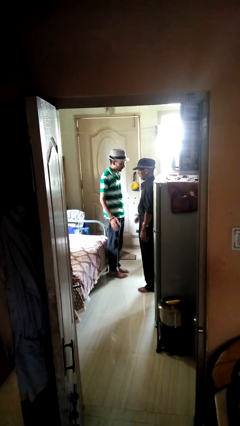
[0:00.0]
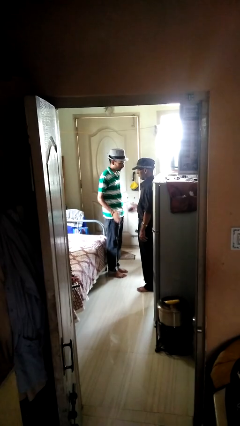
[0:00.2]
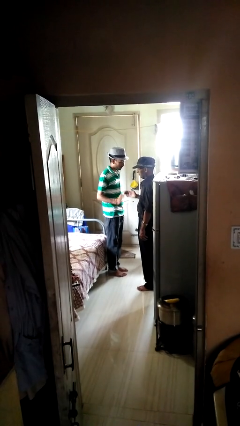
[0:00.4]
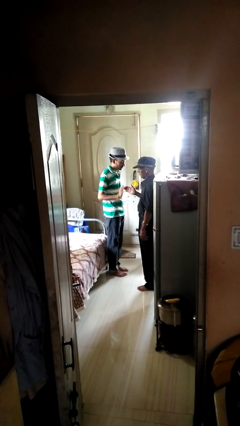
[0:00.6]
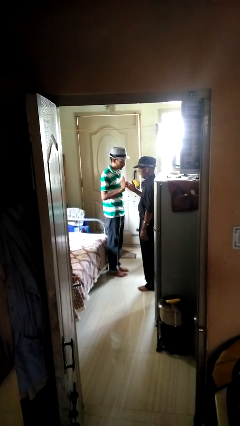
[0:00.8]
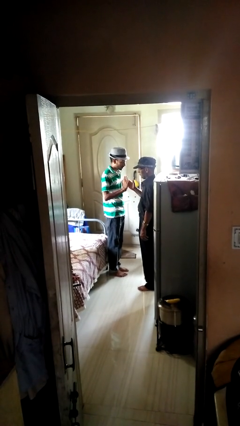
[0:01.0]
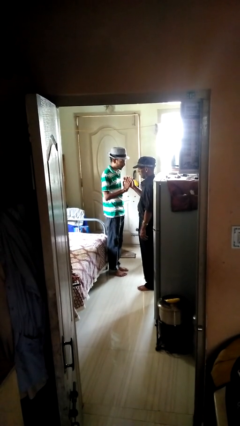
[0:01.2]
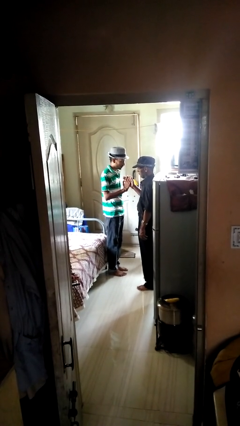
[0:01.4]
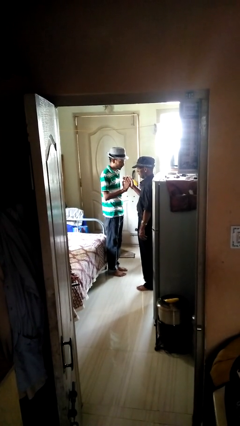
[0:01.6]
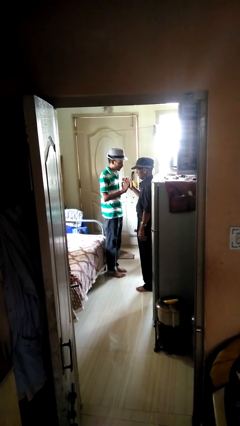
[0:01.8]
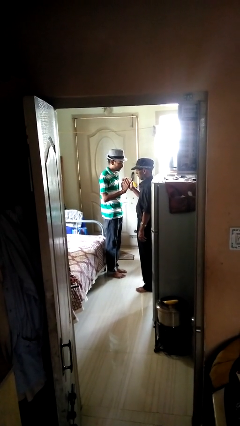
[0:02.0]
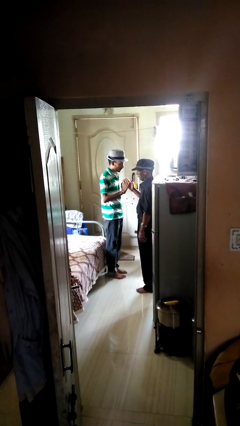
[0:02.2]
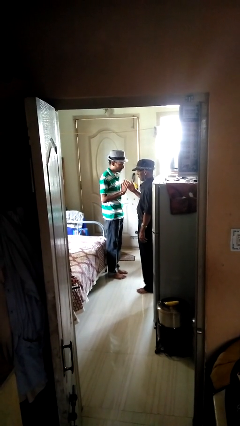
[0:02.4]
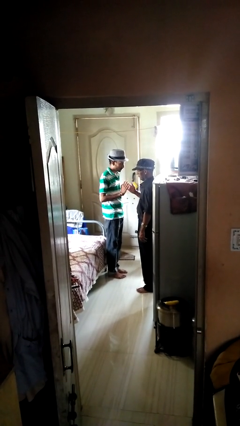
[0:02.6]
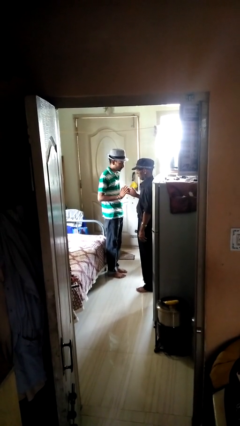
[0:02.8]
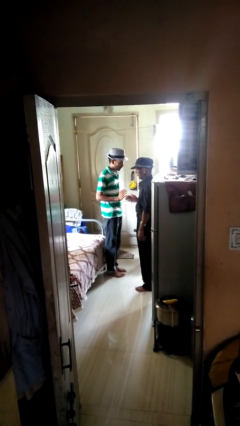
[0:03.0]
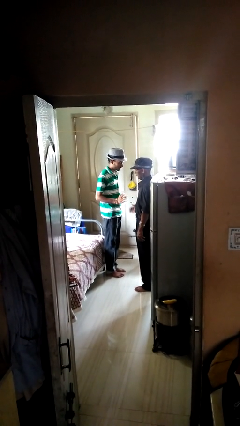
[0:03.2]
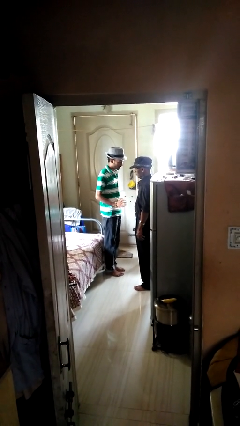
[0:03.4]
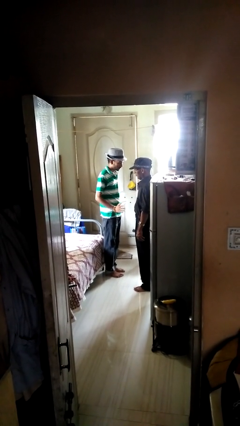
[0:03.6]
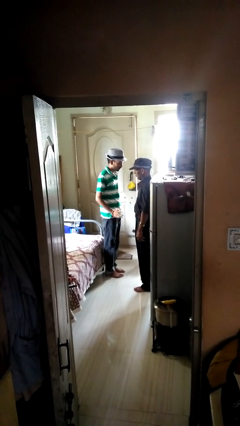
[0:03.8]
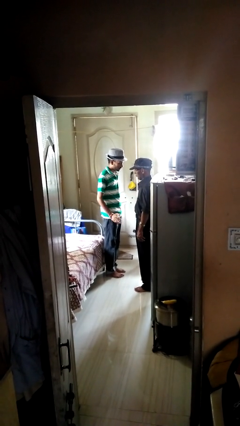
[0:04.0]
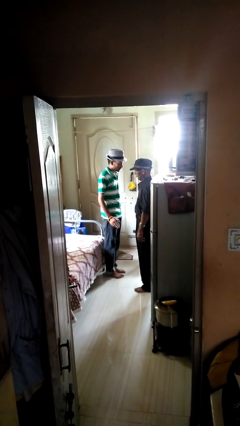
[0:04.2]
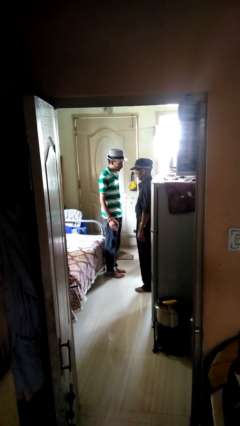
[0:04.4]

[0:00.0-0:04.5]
person highfives hand

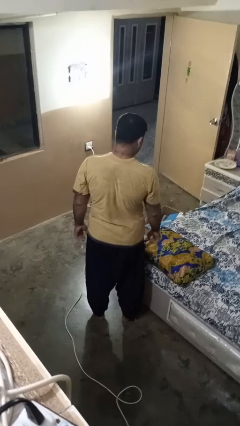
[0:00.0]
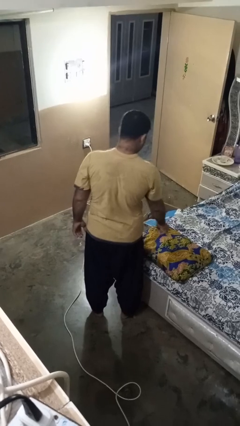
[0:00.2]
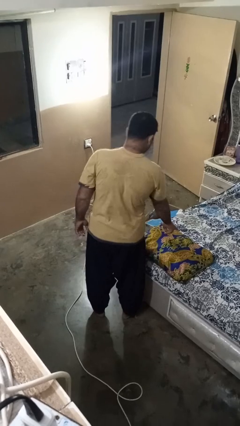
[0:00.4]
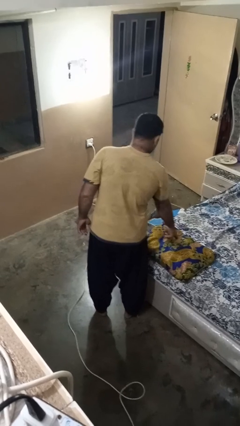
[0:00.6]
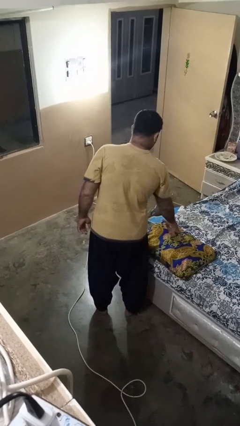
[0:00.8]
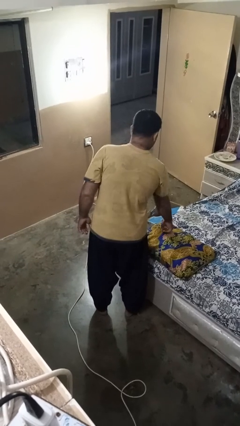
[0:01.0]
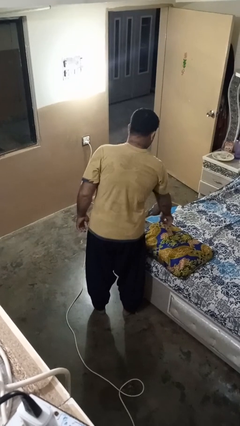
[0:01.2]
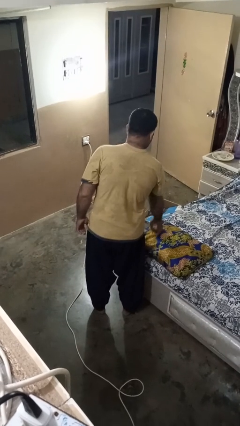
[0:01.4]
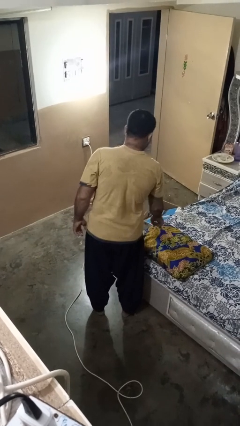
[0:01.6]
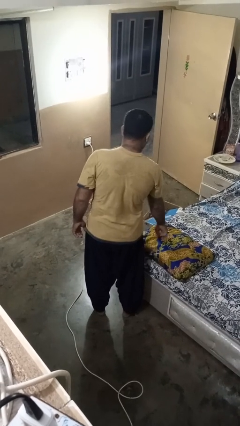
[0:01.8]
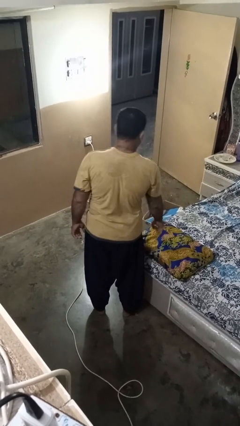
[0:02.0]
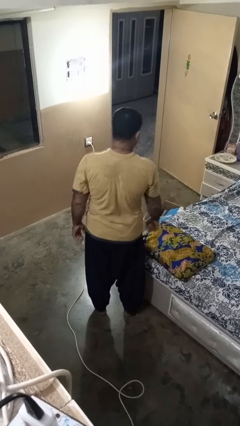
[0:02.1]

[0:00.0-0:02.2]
person taps object with finger

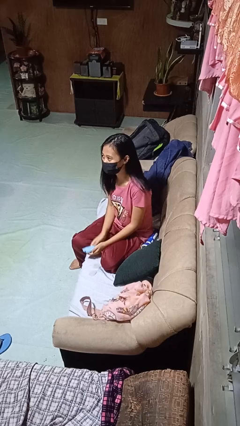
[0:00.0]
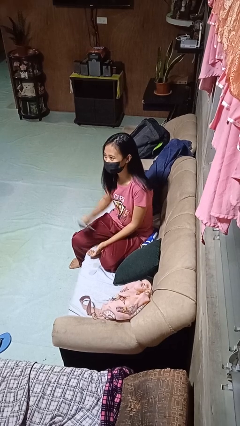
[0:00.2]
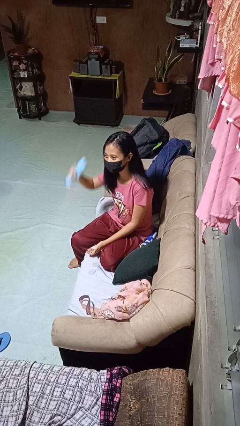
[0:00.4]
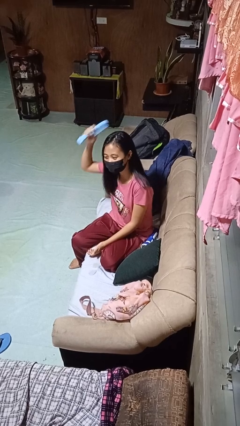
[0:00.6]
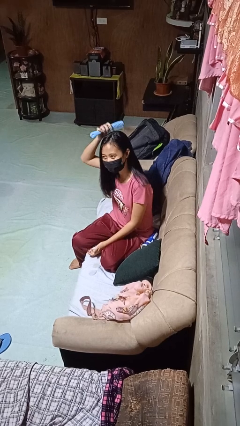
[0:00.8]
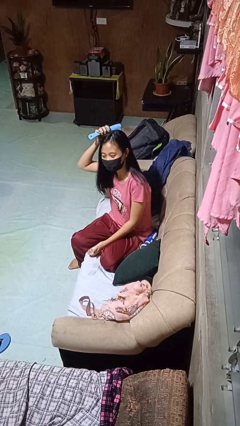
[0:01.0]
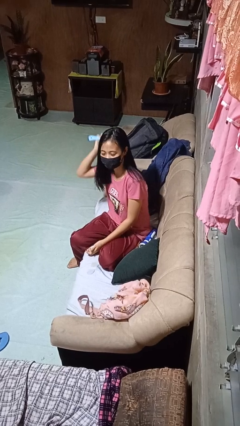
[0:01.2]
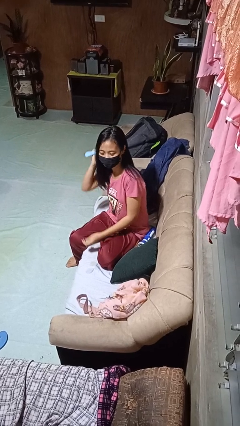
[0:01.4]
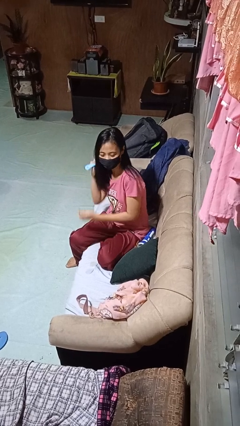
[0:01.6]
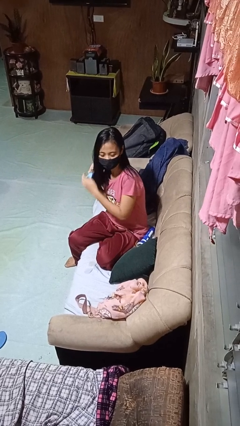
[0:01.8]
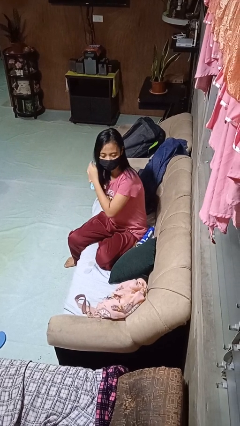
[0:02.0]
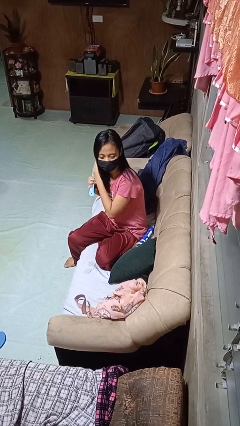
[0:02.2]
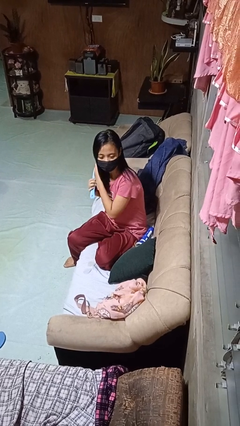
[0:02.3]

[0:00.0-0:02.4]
person brushes hair

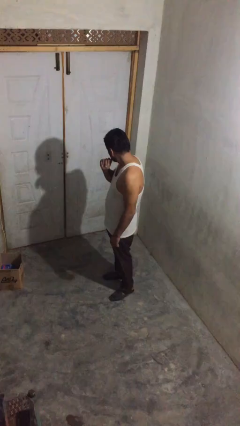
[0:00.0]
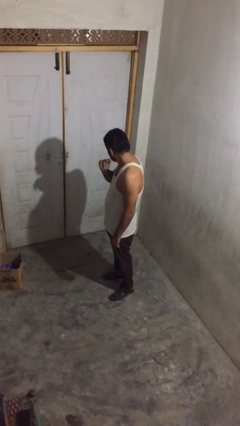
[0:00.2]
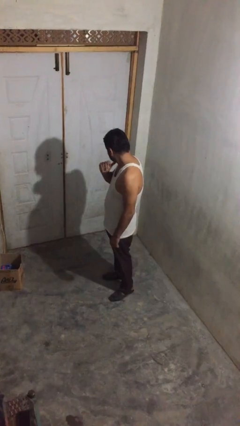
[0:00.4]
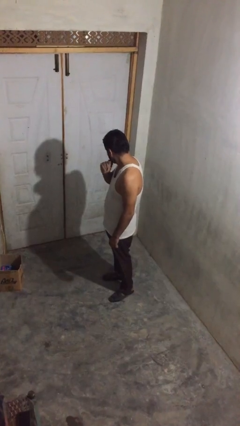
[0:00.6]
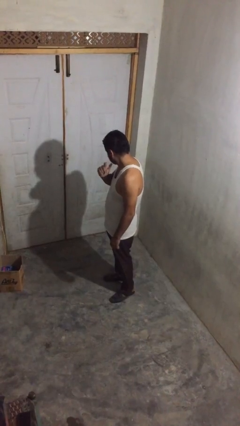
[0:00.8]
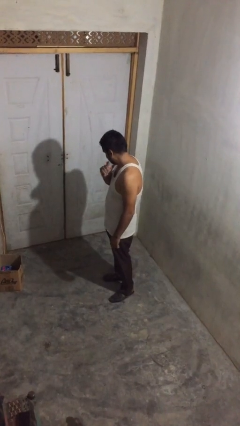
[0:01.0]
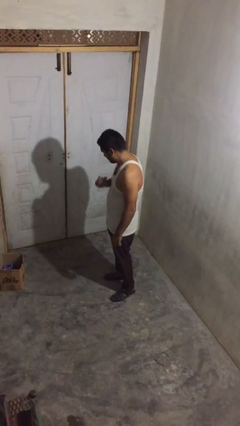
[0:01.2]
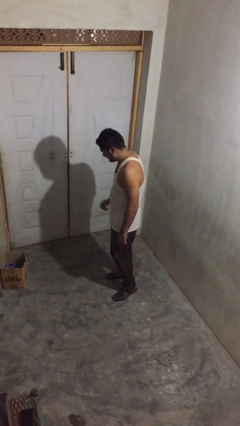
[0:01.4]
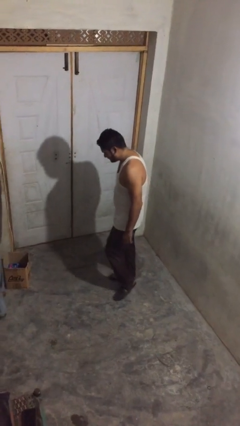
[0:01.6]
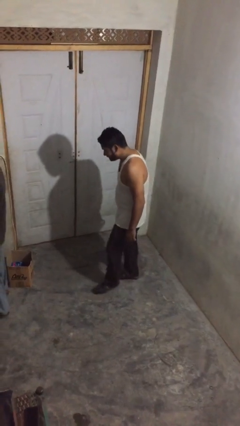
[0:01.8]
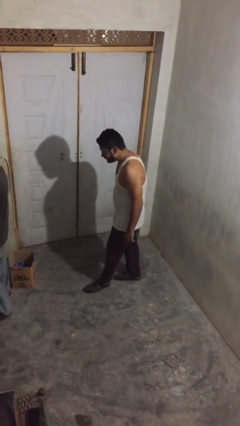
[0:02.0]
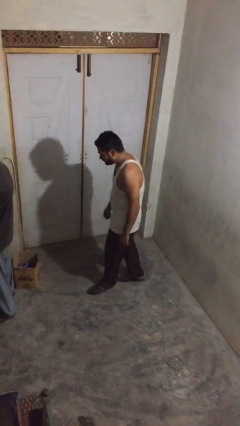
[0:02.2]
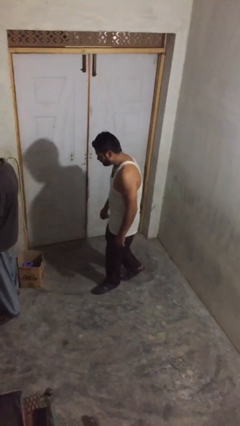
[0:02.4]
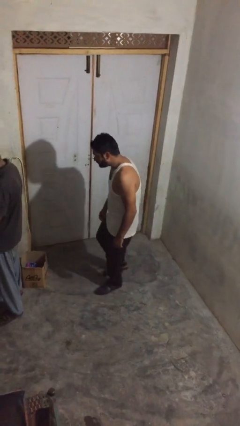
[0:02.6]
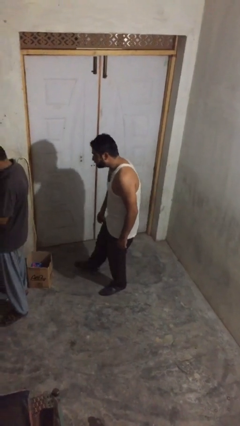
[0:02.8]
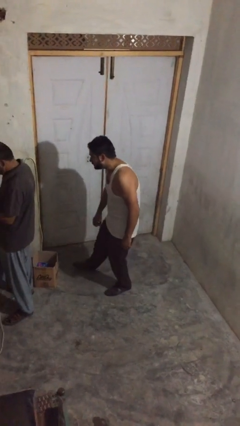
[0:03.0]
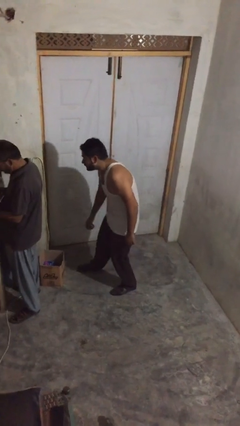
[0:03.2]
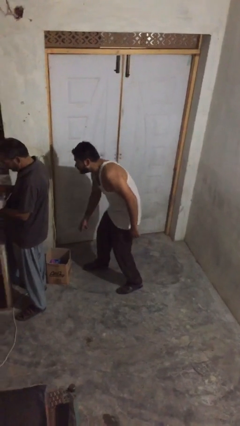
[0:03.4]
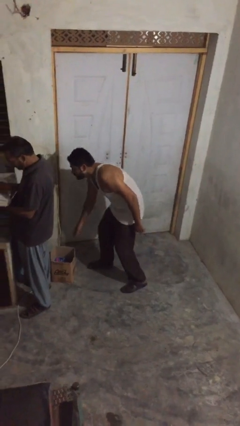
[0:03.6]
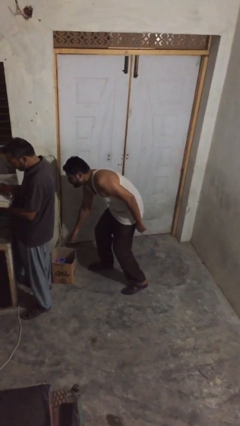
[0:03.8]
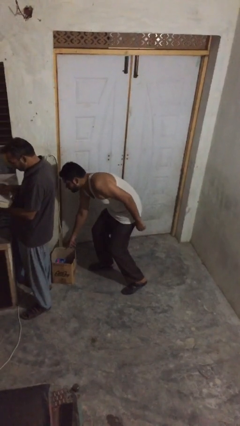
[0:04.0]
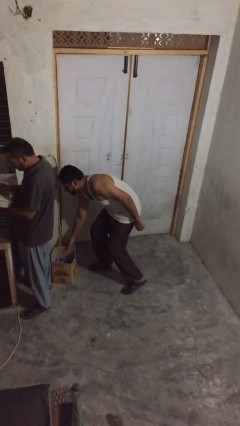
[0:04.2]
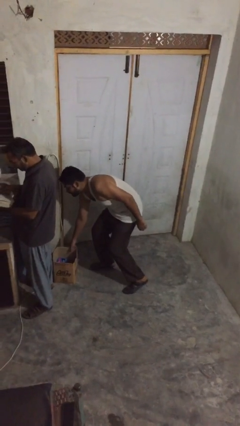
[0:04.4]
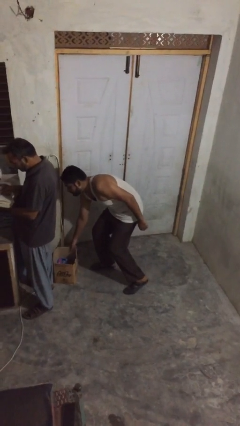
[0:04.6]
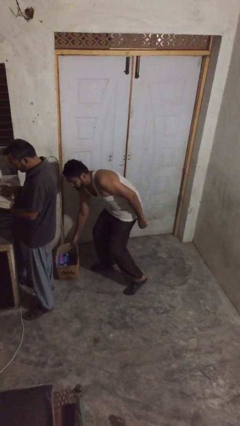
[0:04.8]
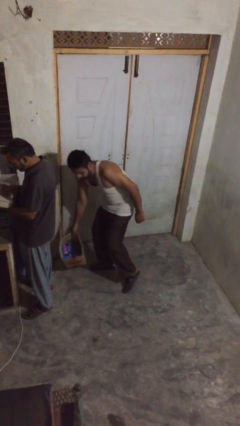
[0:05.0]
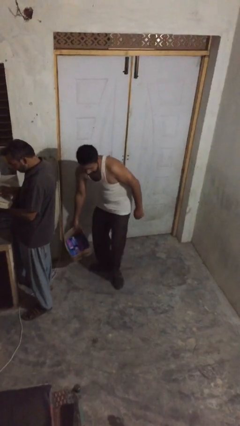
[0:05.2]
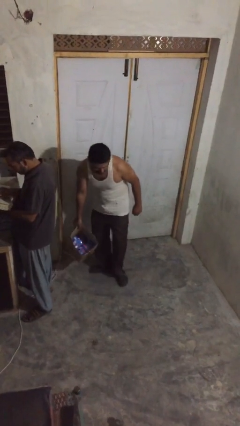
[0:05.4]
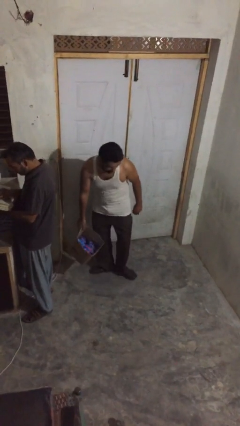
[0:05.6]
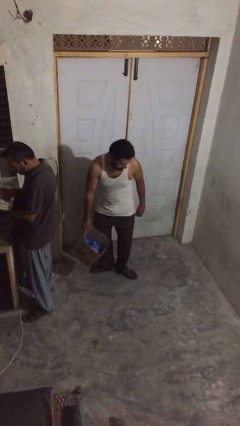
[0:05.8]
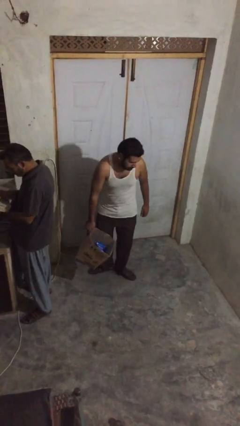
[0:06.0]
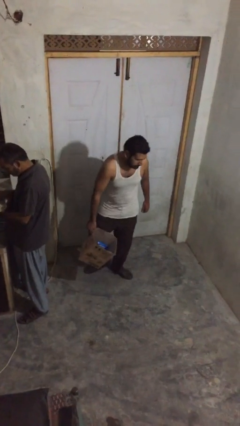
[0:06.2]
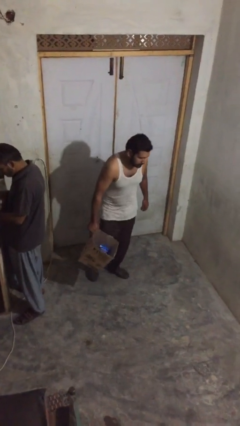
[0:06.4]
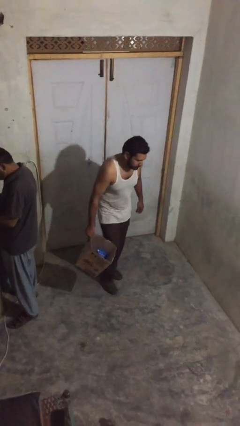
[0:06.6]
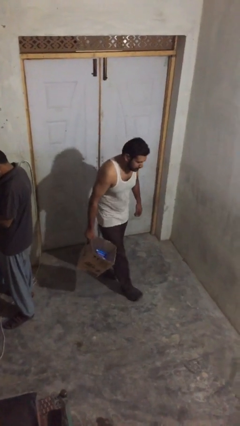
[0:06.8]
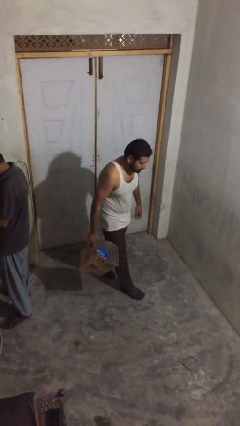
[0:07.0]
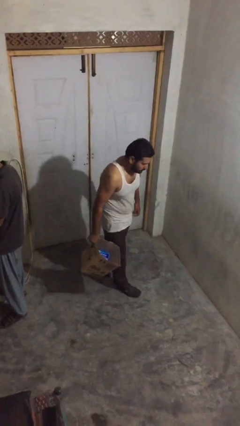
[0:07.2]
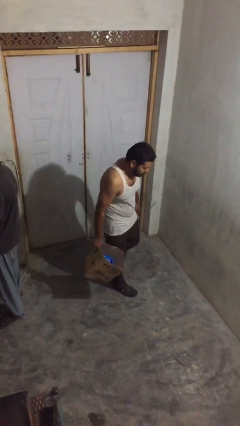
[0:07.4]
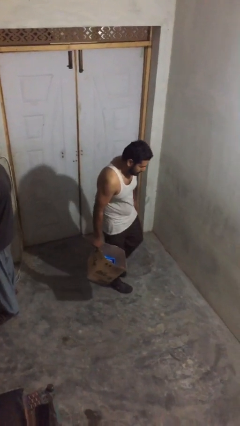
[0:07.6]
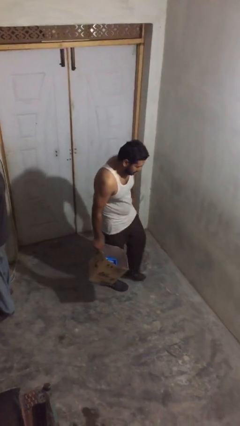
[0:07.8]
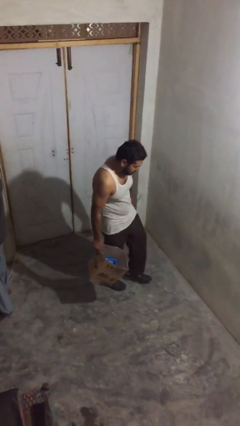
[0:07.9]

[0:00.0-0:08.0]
person steals object from person

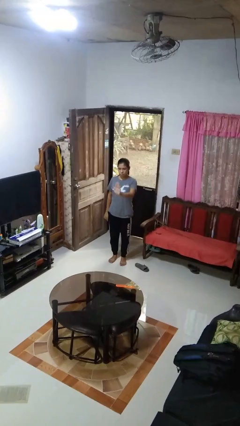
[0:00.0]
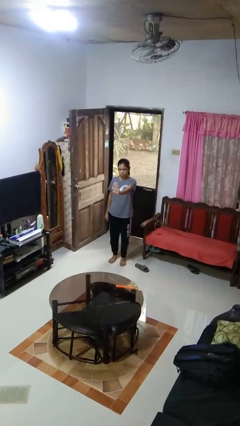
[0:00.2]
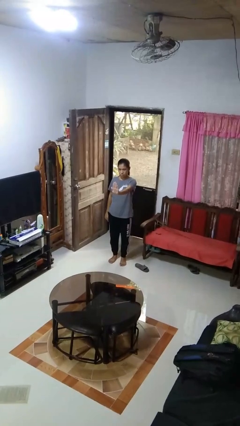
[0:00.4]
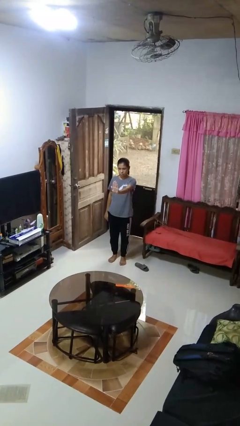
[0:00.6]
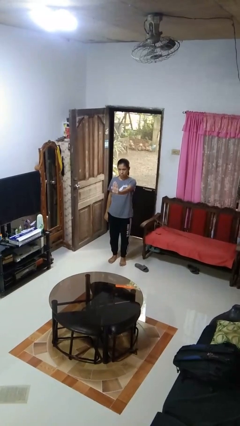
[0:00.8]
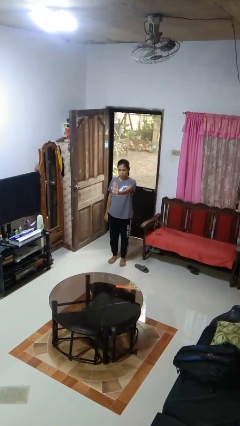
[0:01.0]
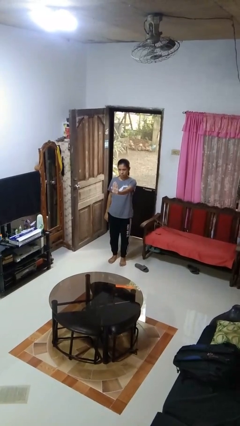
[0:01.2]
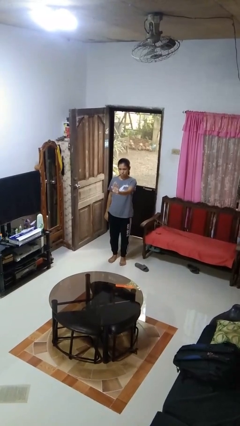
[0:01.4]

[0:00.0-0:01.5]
person gestures stop
